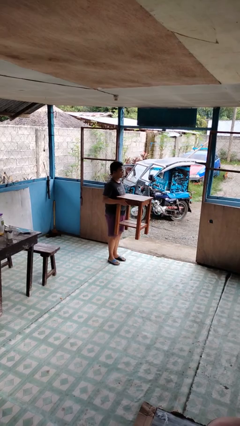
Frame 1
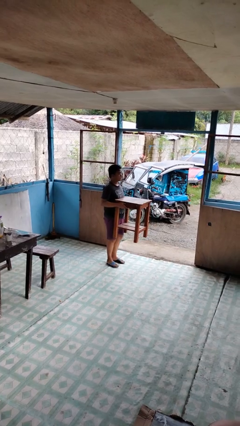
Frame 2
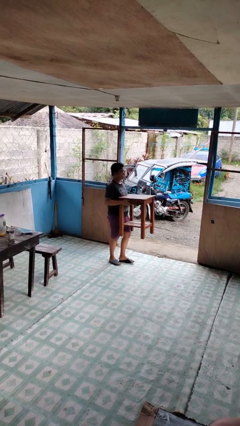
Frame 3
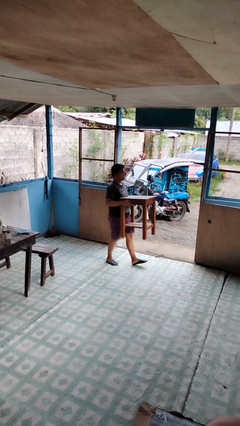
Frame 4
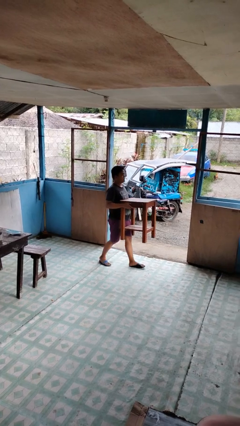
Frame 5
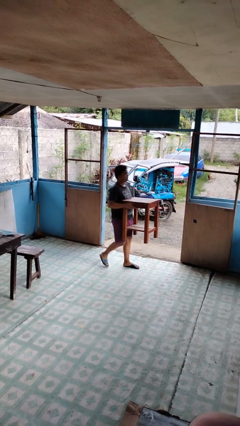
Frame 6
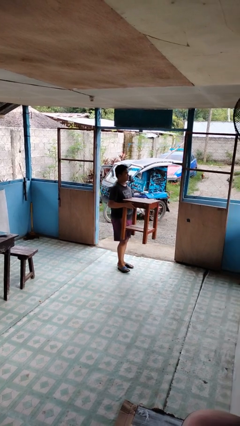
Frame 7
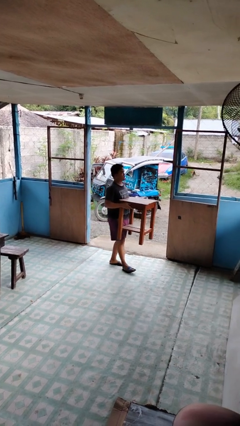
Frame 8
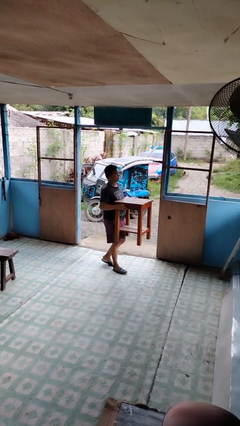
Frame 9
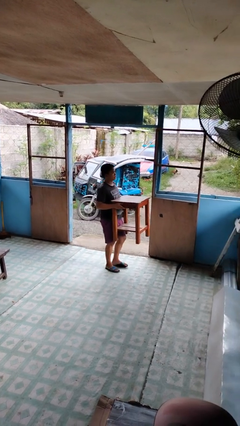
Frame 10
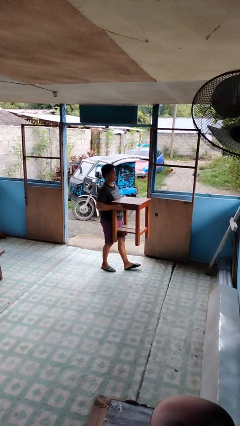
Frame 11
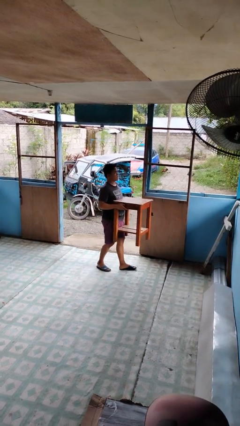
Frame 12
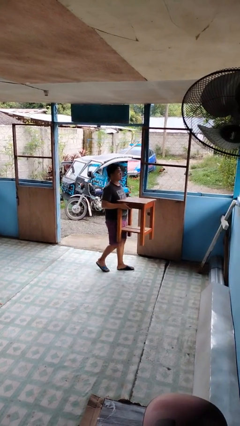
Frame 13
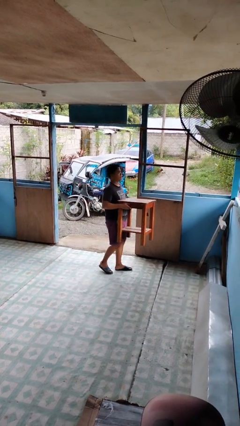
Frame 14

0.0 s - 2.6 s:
person carries furniture

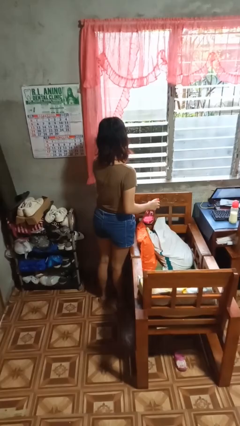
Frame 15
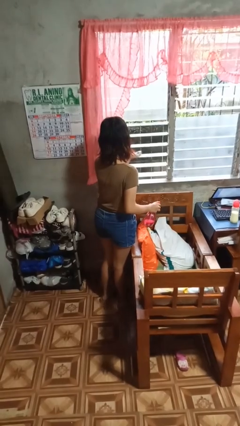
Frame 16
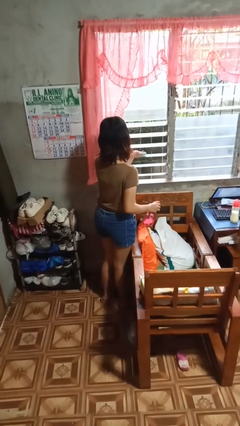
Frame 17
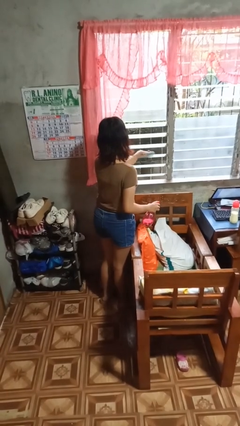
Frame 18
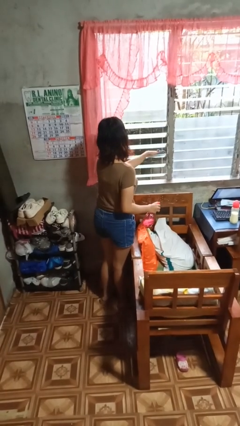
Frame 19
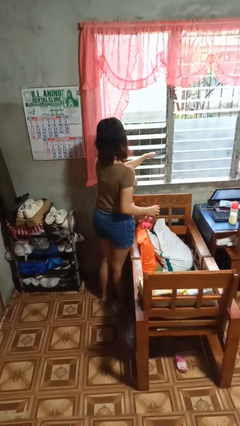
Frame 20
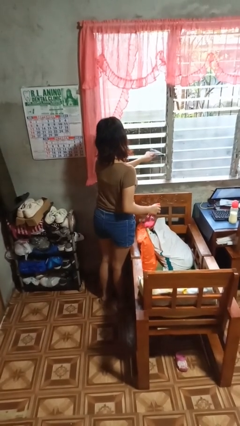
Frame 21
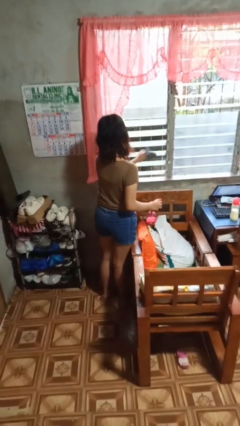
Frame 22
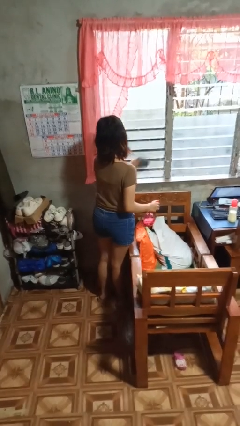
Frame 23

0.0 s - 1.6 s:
person washes window

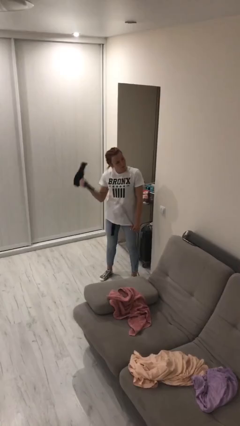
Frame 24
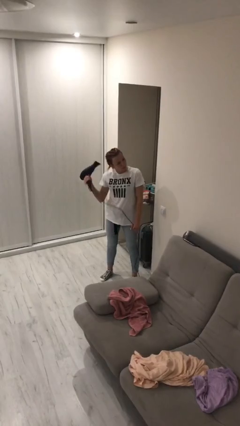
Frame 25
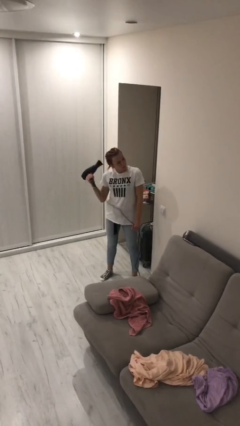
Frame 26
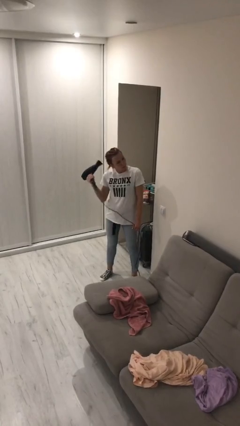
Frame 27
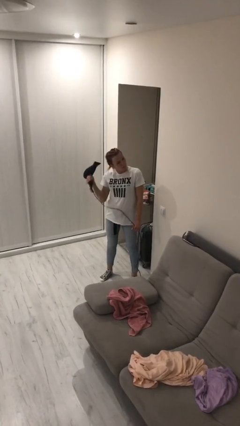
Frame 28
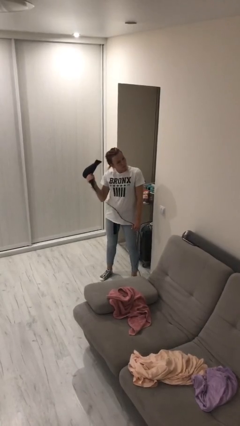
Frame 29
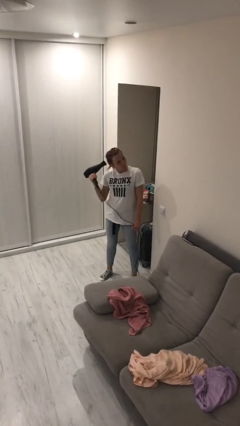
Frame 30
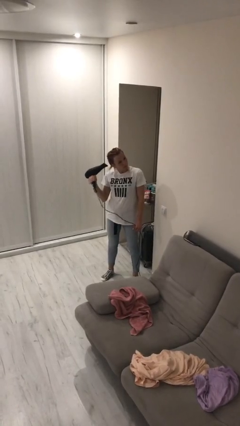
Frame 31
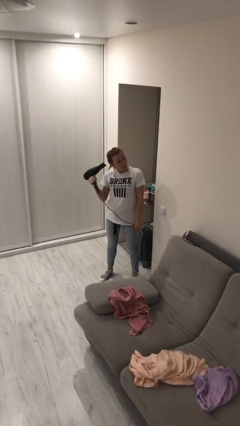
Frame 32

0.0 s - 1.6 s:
person dries hair with hairdryer

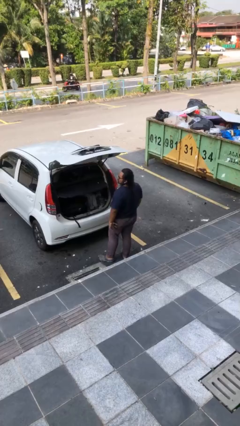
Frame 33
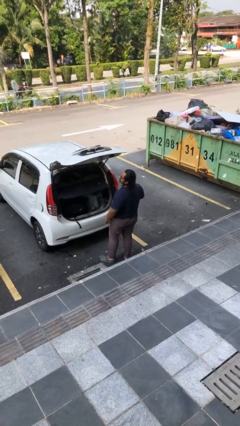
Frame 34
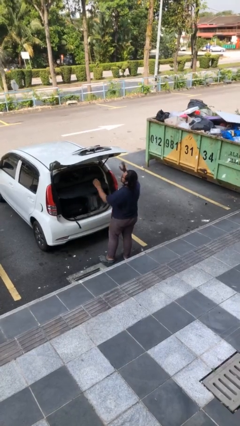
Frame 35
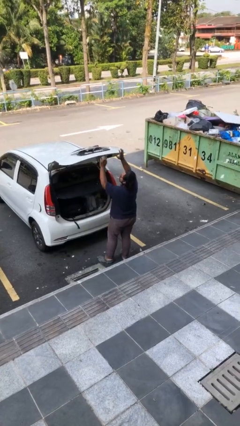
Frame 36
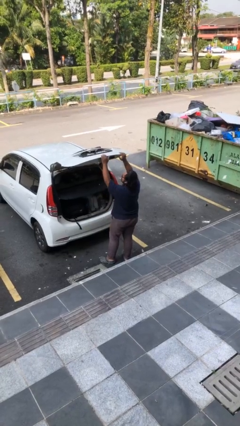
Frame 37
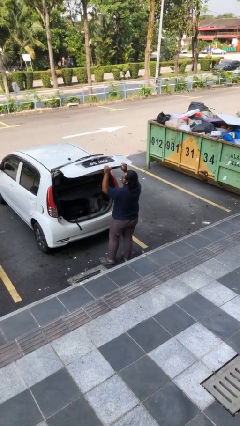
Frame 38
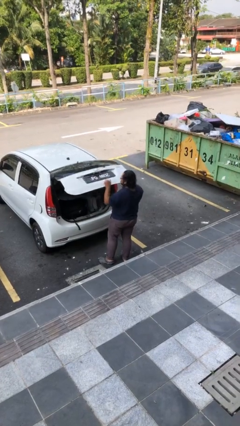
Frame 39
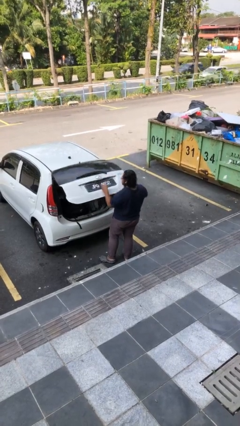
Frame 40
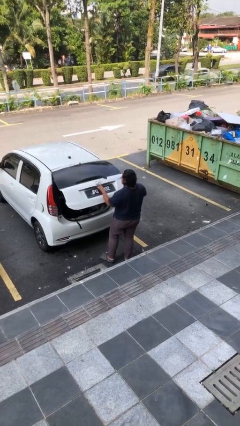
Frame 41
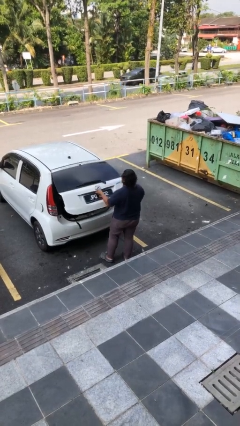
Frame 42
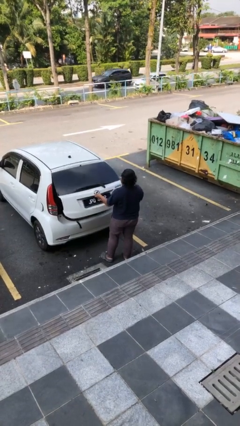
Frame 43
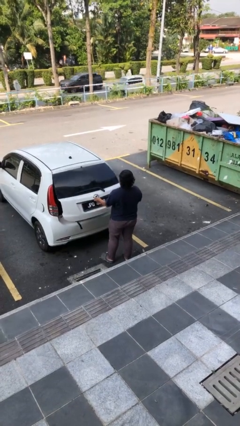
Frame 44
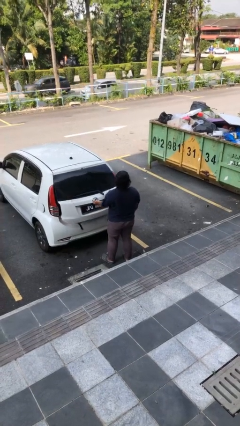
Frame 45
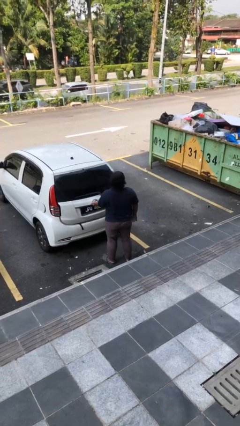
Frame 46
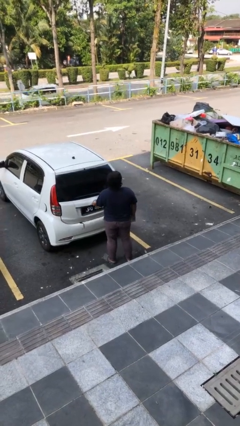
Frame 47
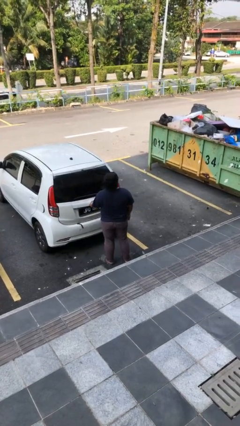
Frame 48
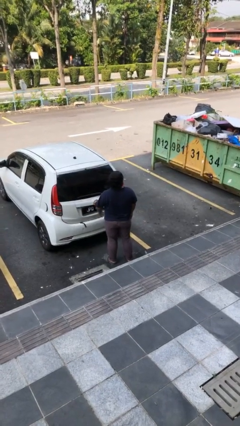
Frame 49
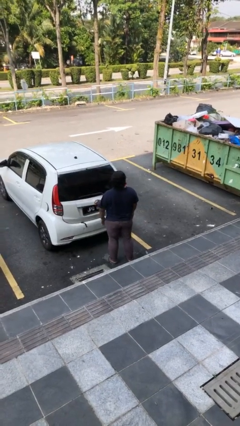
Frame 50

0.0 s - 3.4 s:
person closes car trunk

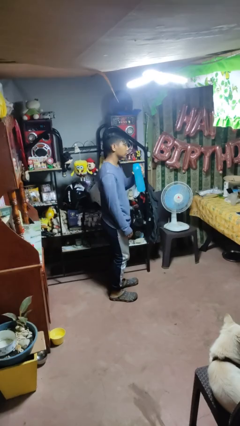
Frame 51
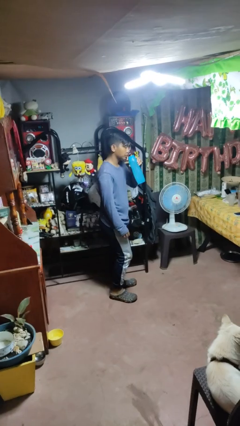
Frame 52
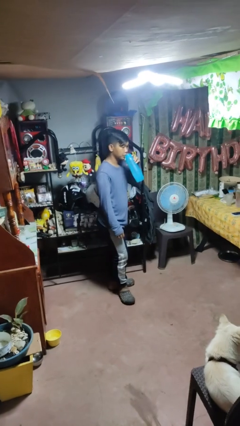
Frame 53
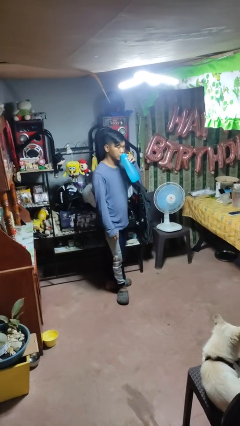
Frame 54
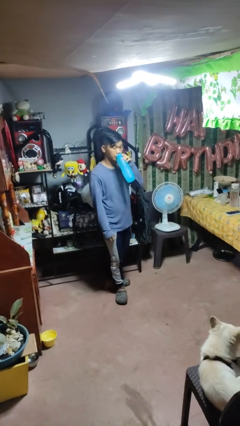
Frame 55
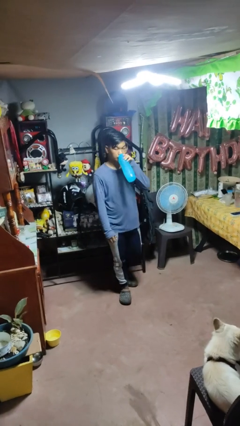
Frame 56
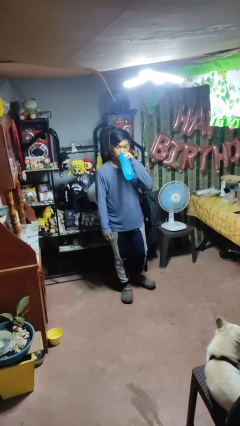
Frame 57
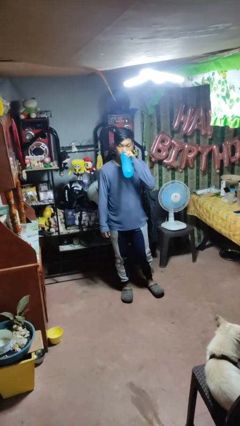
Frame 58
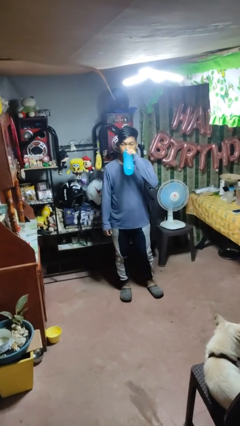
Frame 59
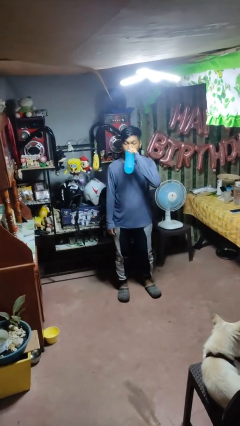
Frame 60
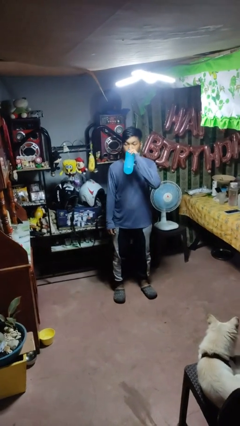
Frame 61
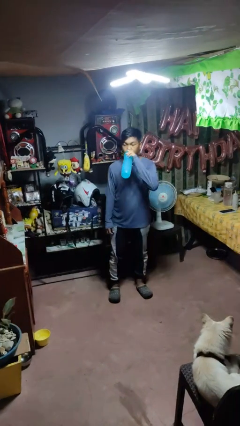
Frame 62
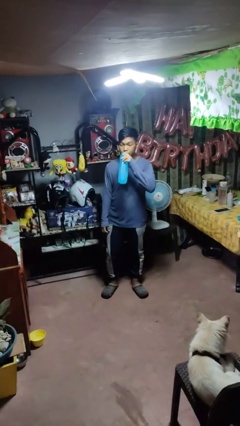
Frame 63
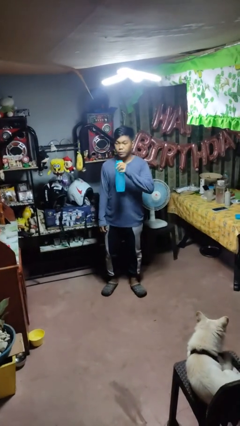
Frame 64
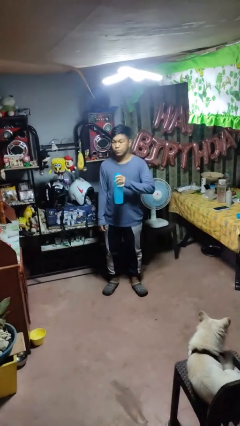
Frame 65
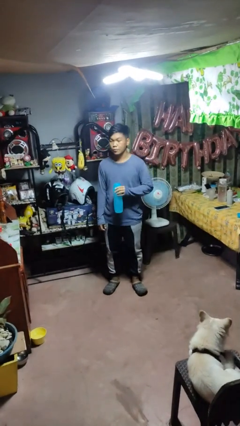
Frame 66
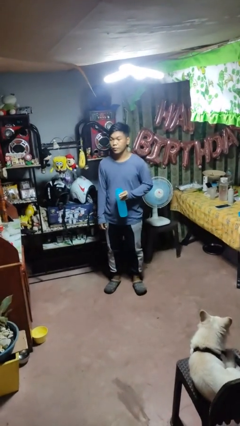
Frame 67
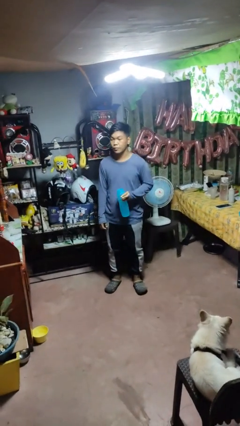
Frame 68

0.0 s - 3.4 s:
person drinks from bottle

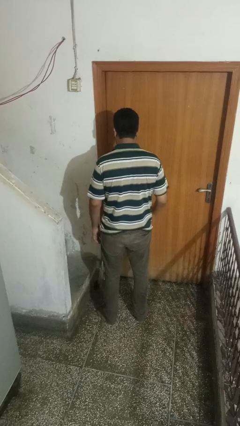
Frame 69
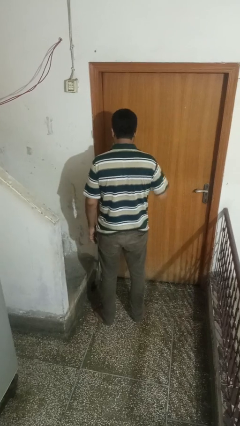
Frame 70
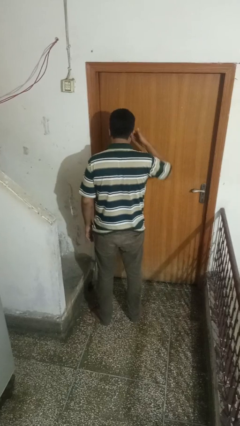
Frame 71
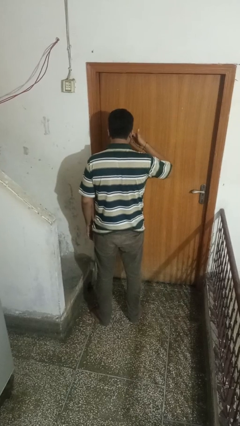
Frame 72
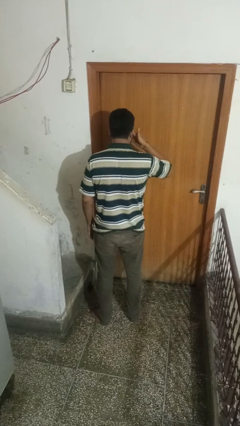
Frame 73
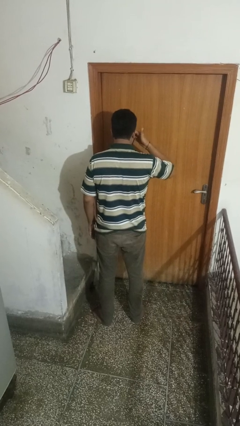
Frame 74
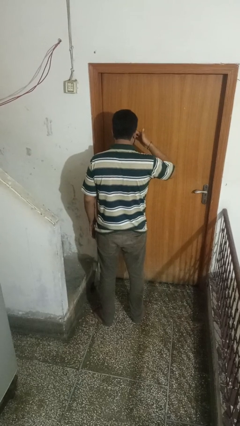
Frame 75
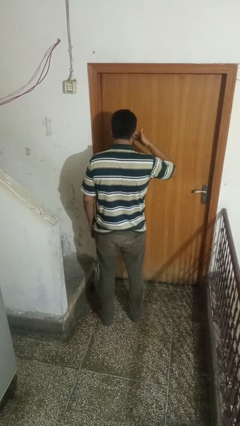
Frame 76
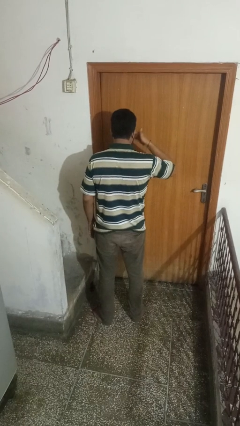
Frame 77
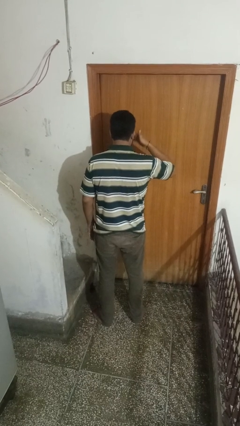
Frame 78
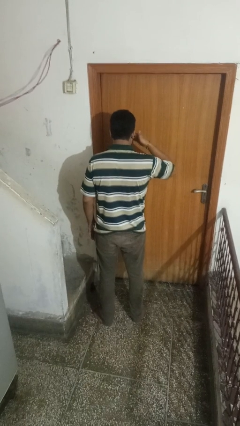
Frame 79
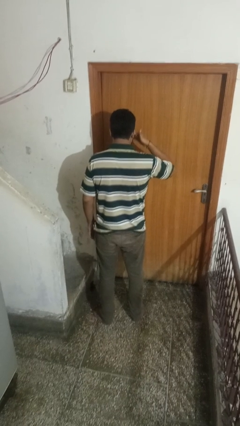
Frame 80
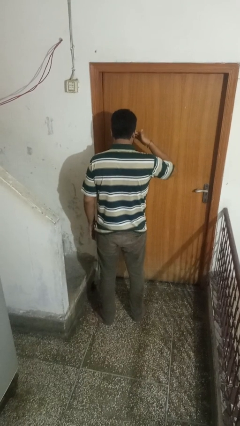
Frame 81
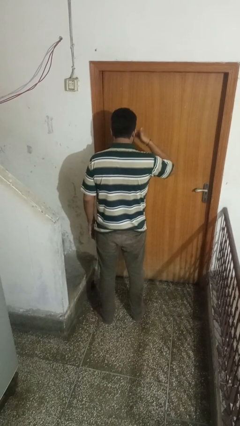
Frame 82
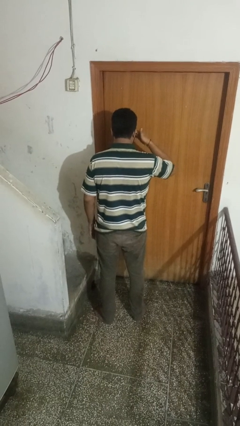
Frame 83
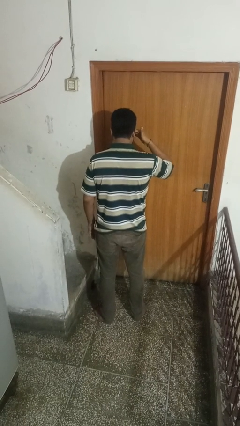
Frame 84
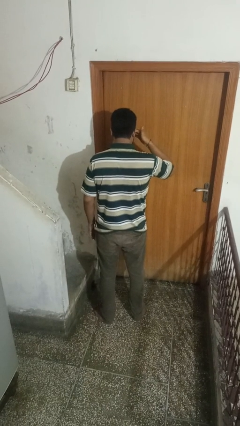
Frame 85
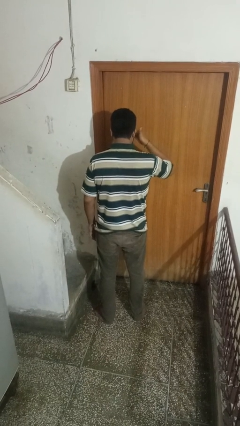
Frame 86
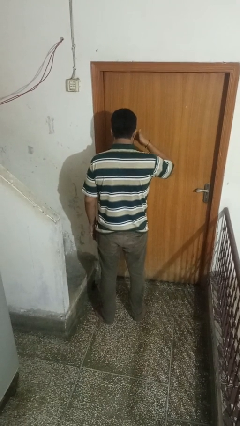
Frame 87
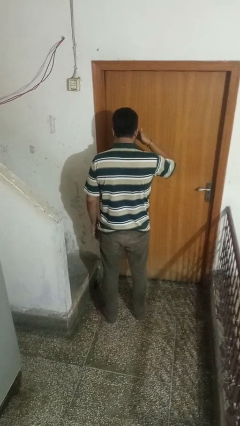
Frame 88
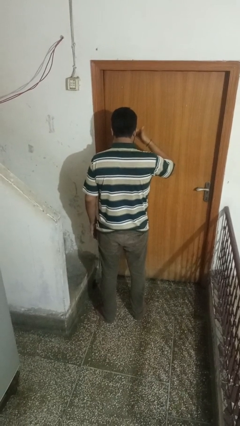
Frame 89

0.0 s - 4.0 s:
person rubs eyes

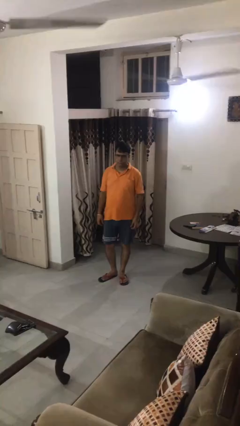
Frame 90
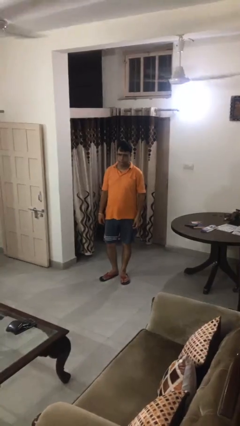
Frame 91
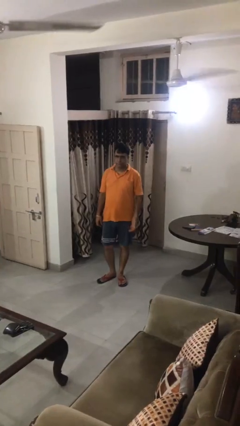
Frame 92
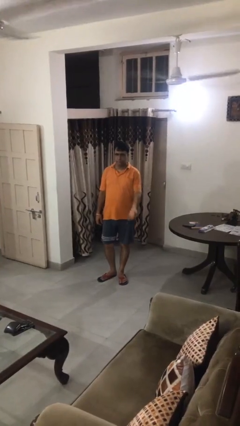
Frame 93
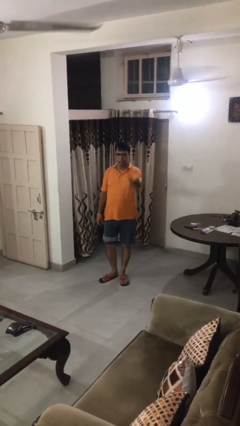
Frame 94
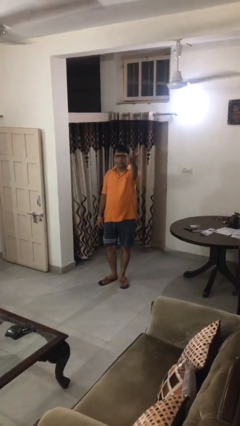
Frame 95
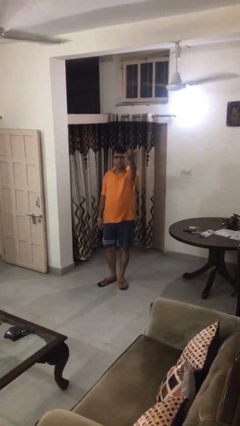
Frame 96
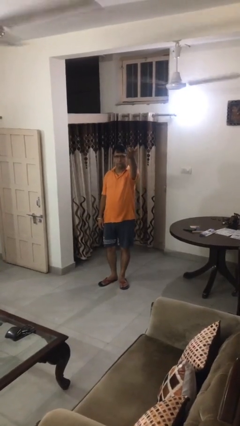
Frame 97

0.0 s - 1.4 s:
person gestures swipe up
